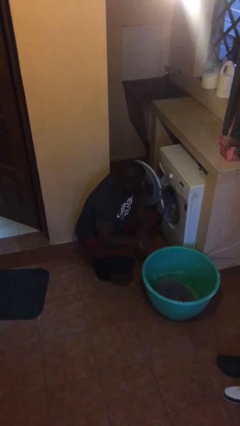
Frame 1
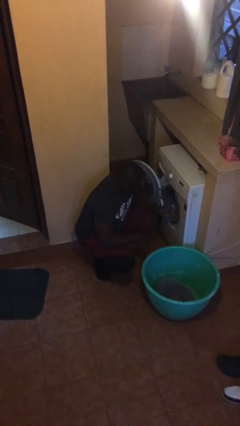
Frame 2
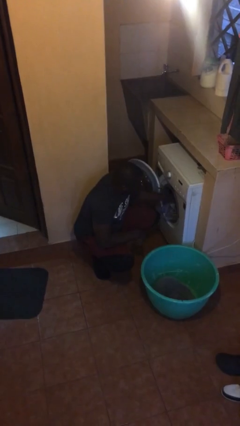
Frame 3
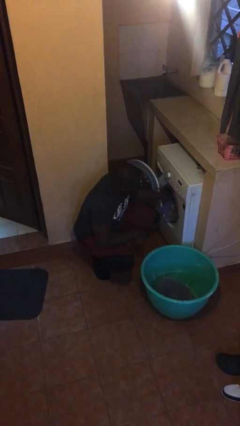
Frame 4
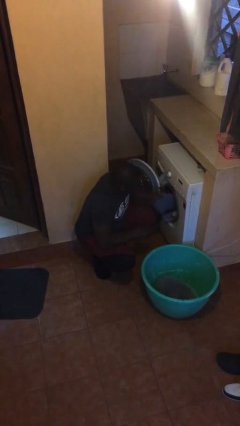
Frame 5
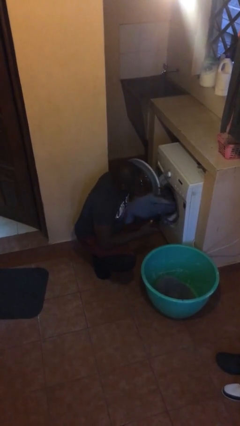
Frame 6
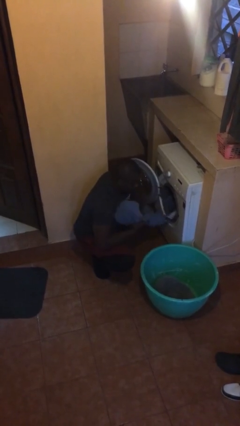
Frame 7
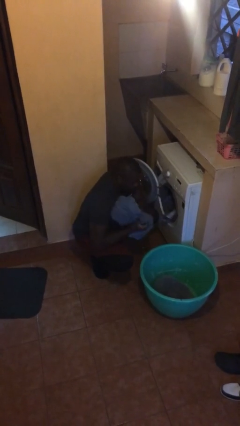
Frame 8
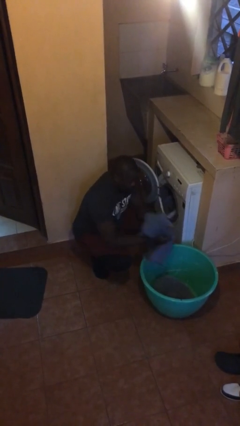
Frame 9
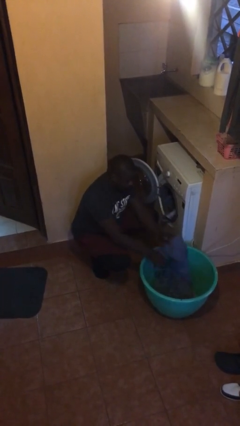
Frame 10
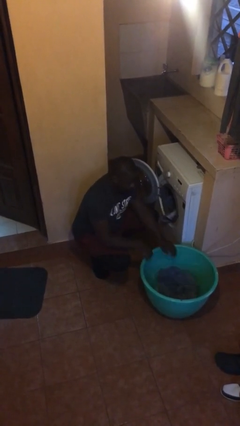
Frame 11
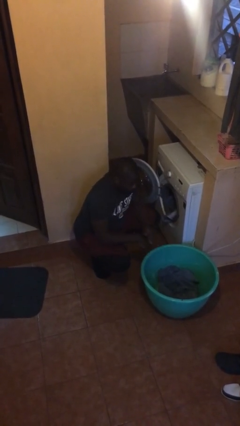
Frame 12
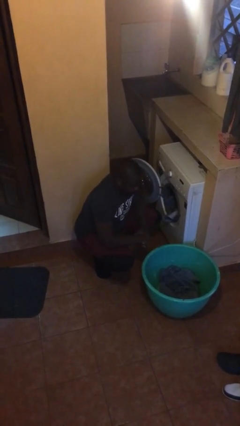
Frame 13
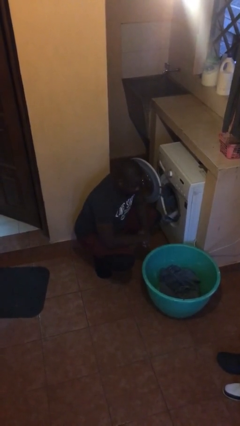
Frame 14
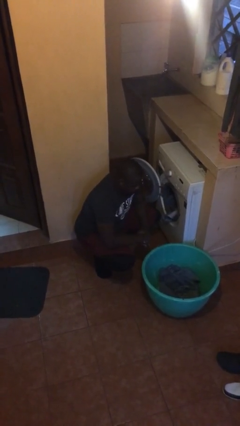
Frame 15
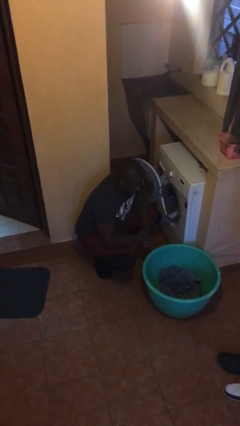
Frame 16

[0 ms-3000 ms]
person unloads clotheswasher

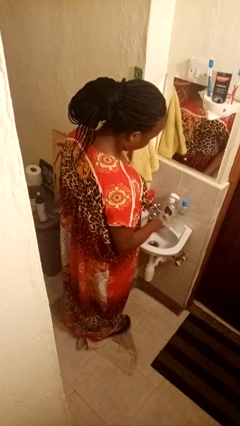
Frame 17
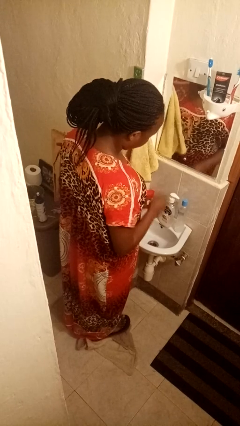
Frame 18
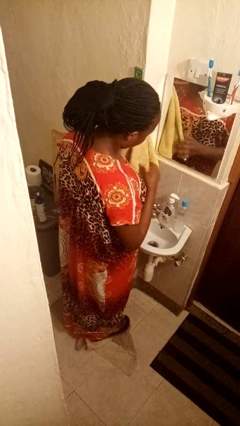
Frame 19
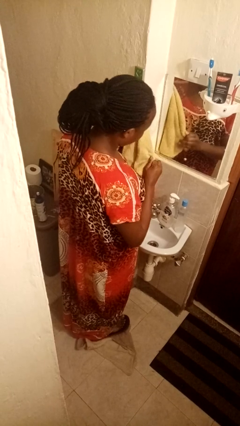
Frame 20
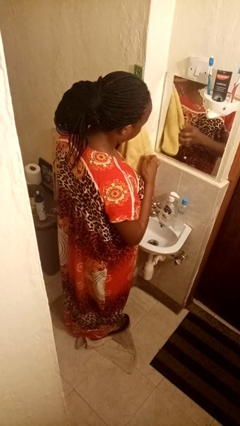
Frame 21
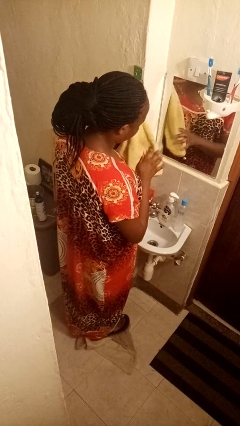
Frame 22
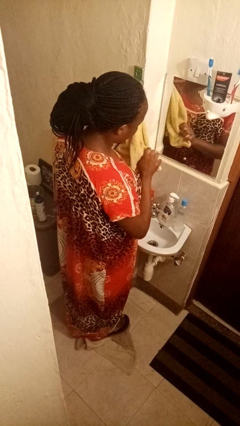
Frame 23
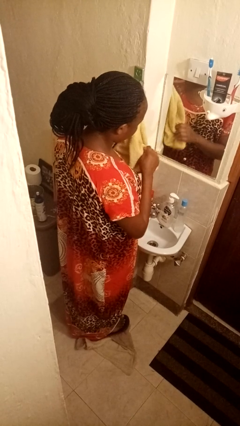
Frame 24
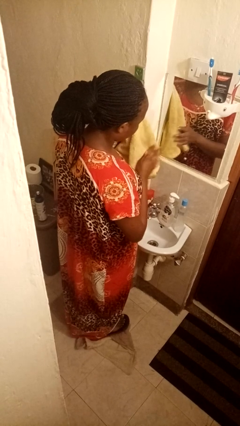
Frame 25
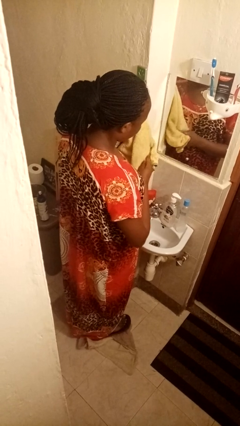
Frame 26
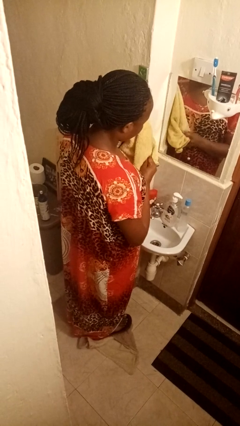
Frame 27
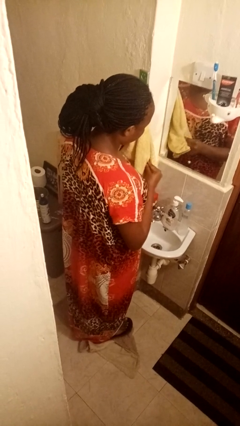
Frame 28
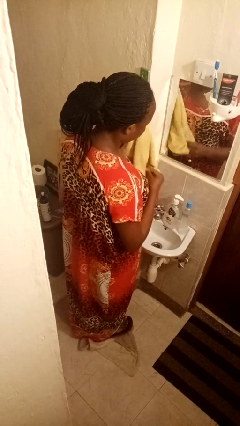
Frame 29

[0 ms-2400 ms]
person dries hands with towel

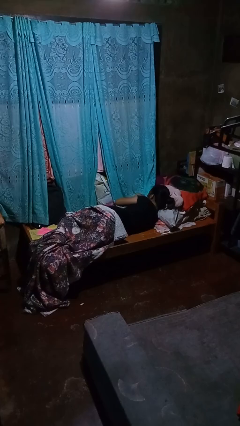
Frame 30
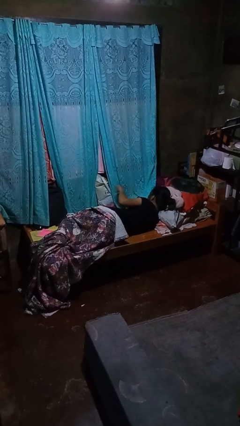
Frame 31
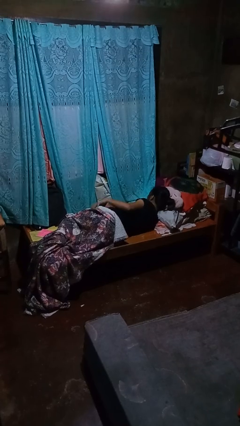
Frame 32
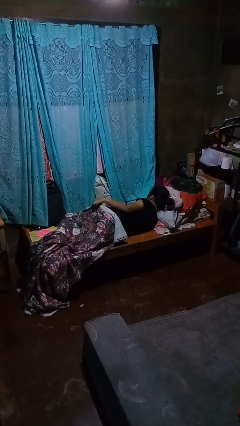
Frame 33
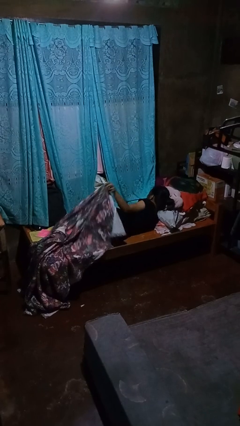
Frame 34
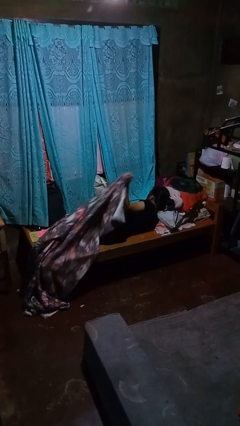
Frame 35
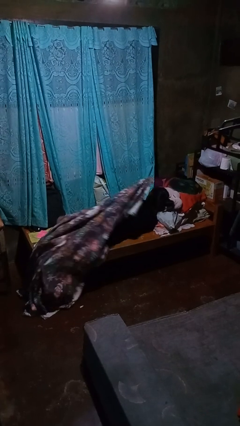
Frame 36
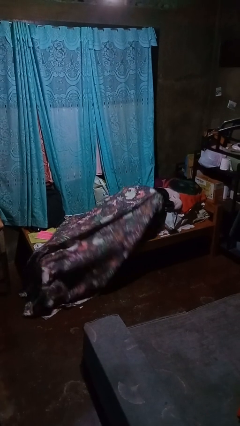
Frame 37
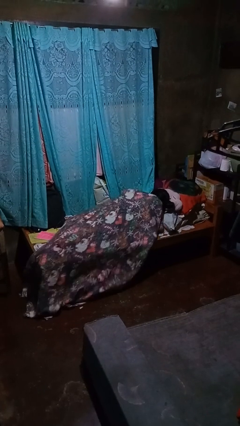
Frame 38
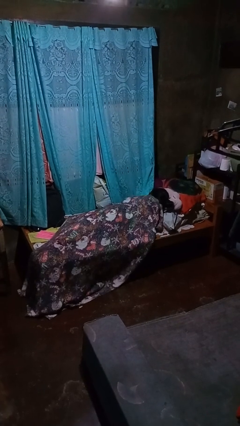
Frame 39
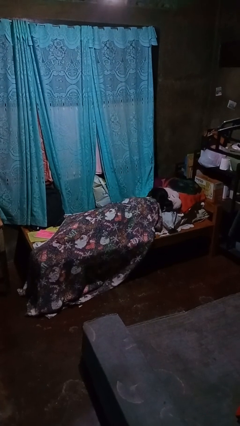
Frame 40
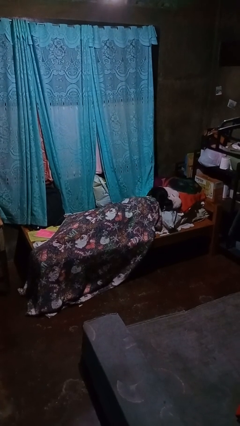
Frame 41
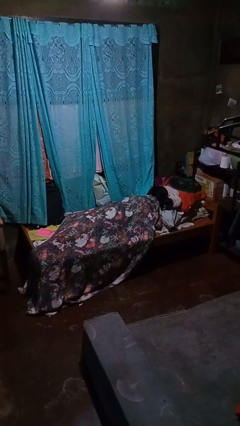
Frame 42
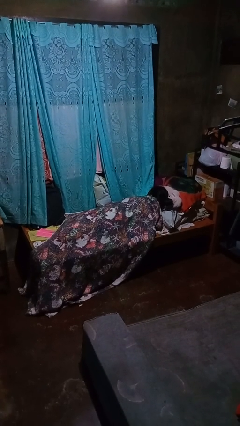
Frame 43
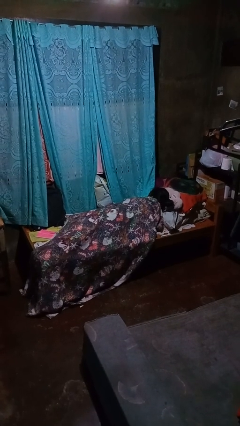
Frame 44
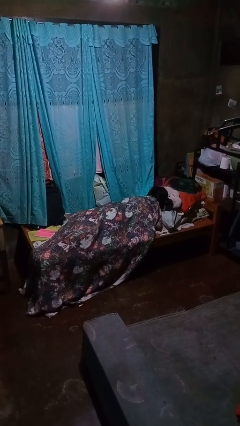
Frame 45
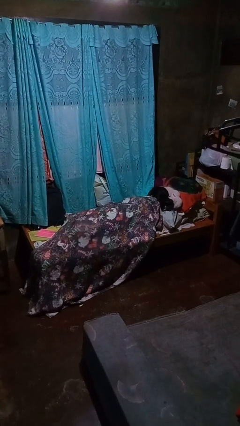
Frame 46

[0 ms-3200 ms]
person covers with bedsheets

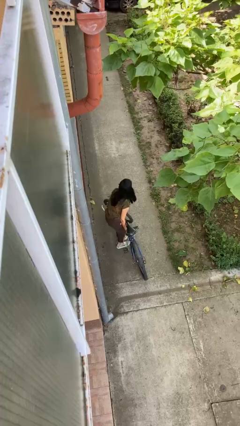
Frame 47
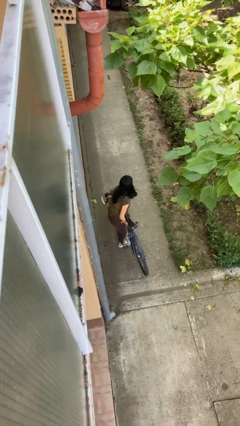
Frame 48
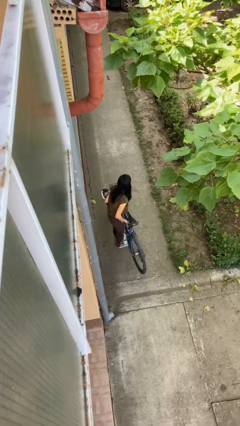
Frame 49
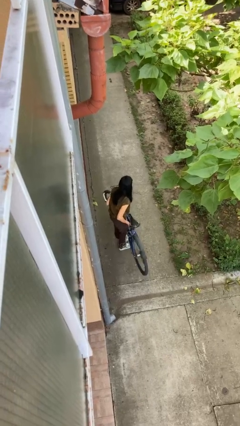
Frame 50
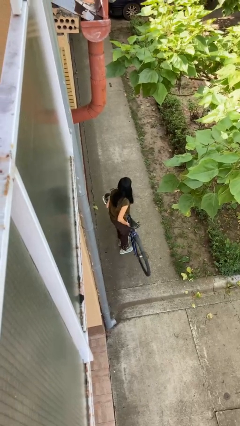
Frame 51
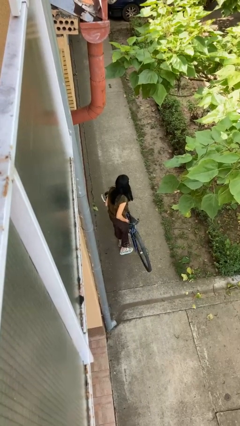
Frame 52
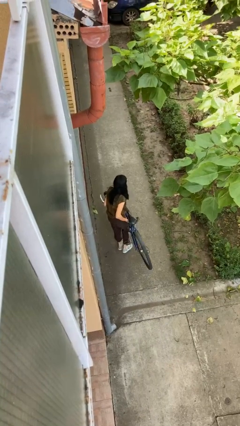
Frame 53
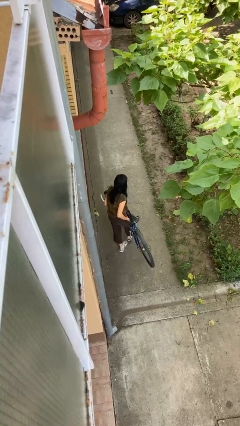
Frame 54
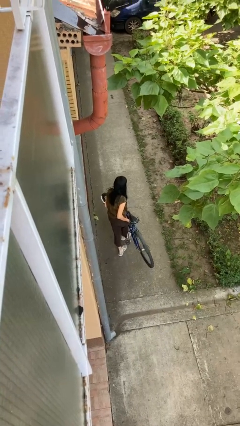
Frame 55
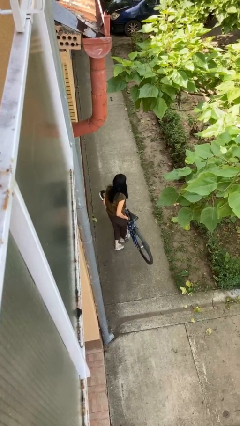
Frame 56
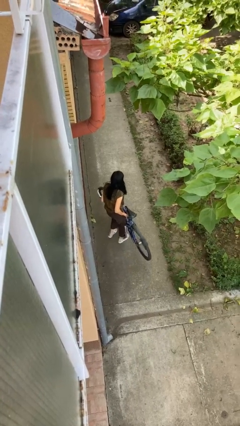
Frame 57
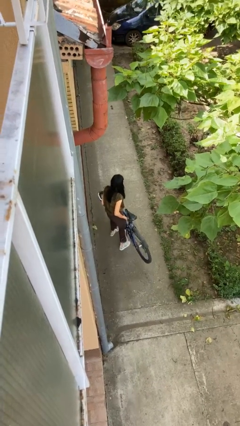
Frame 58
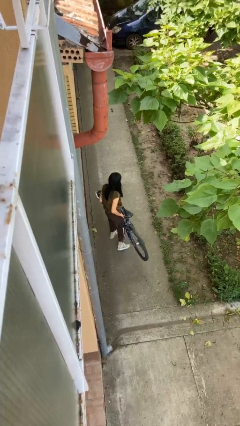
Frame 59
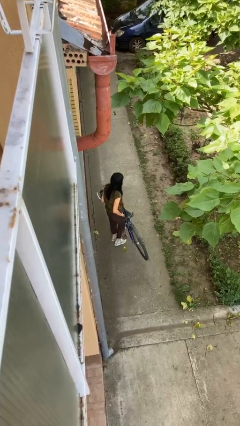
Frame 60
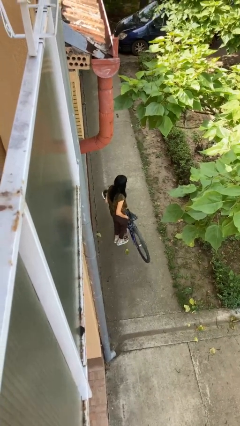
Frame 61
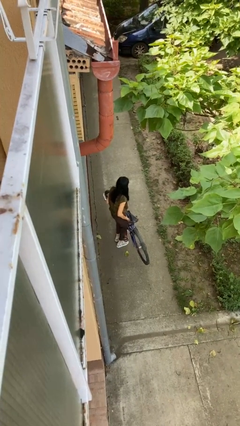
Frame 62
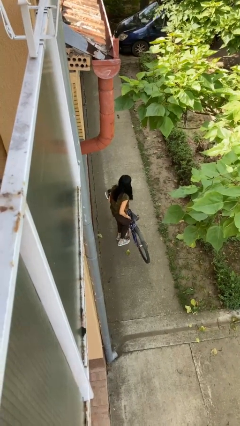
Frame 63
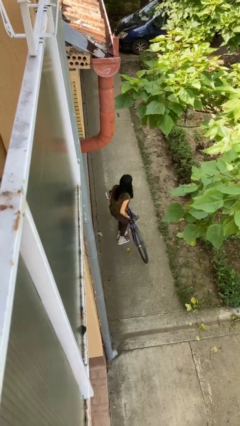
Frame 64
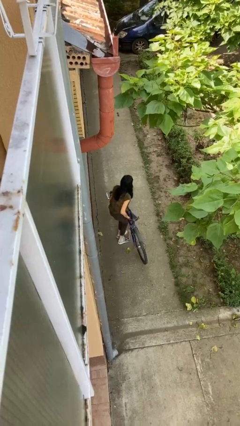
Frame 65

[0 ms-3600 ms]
person carries bicycle

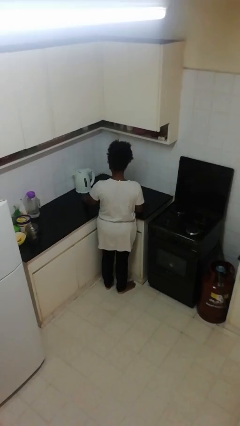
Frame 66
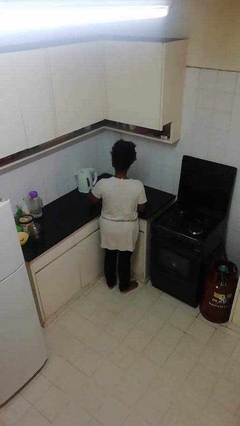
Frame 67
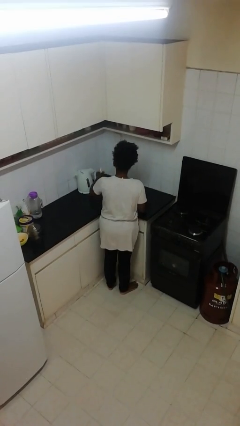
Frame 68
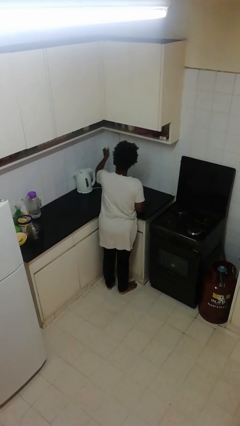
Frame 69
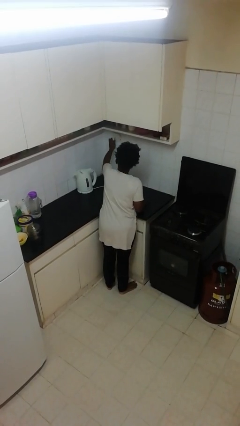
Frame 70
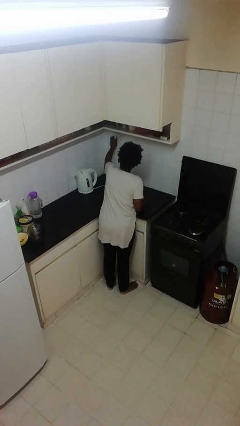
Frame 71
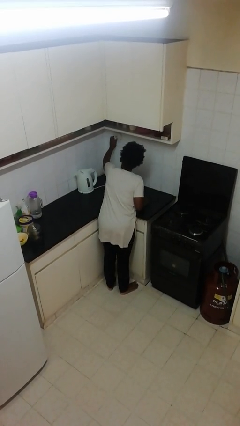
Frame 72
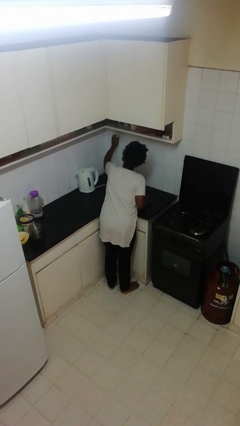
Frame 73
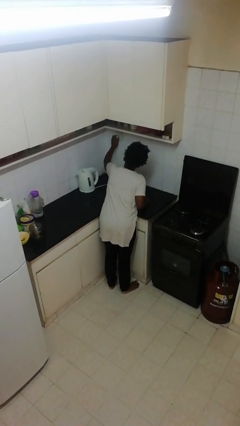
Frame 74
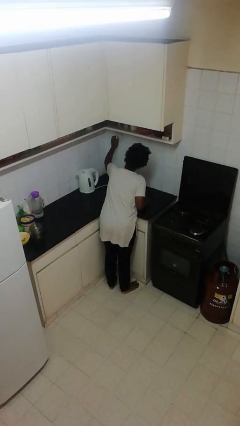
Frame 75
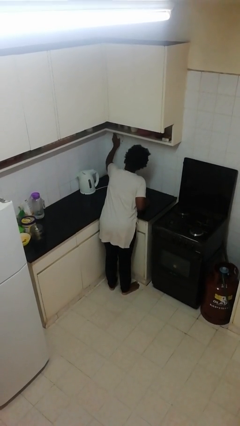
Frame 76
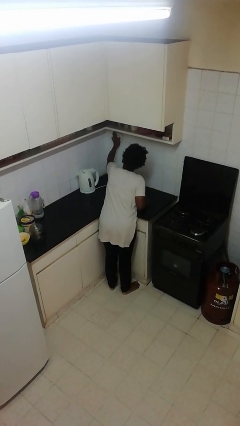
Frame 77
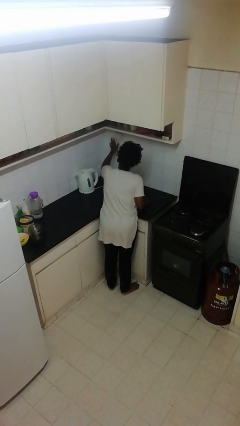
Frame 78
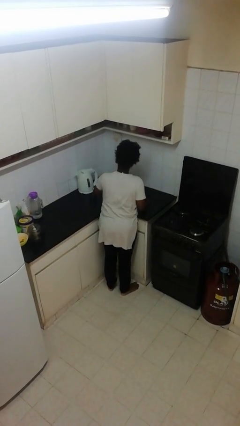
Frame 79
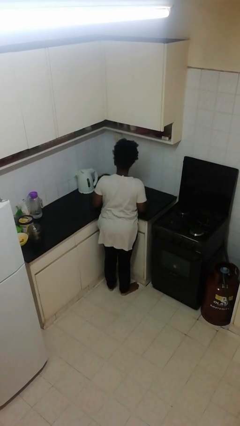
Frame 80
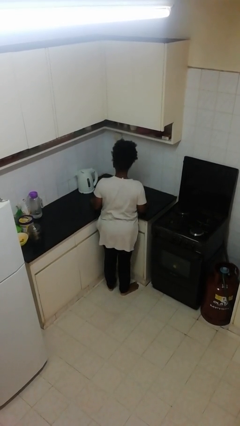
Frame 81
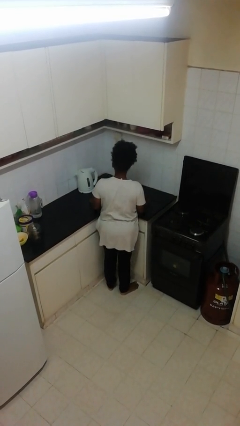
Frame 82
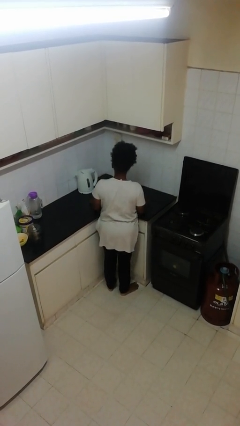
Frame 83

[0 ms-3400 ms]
person plugs into electrical socket

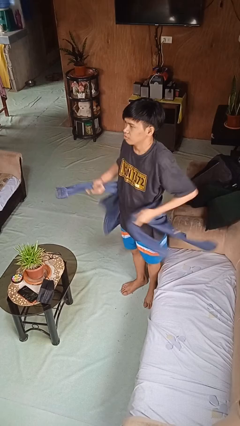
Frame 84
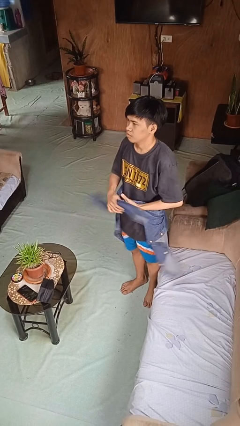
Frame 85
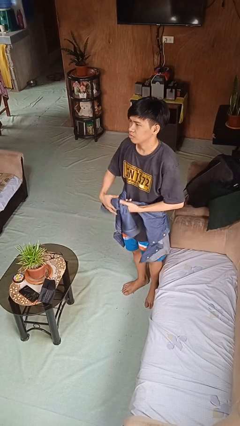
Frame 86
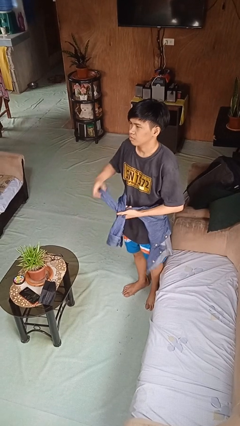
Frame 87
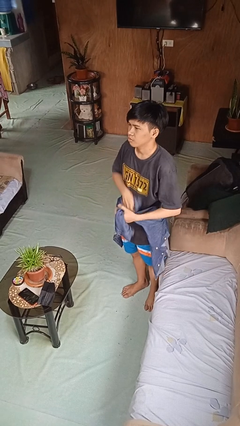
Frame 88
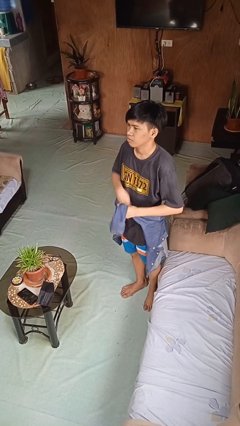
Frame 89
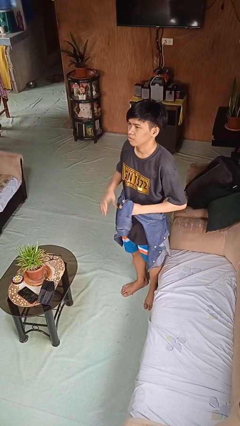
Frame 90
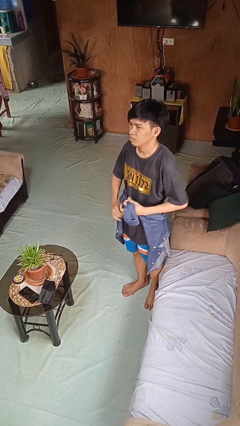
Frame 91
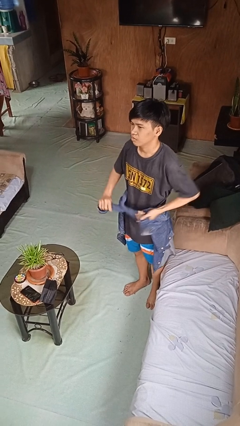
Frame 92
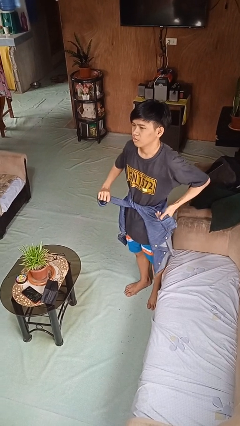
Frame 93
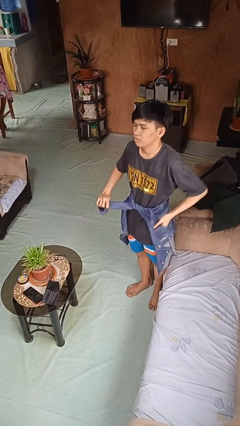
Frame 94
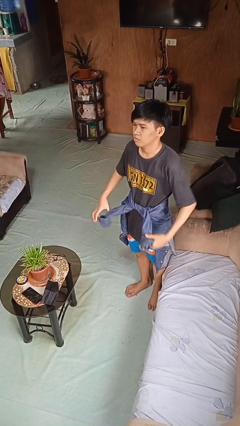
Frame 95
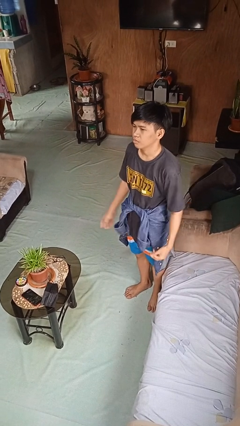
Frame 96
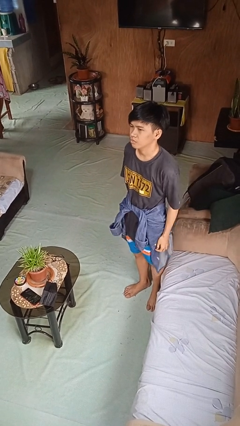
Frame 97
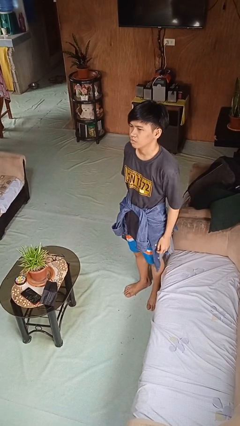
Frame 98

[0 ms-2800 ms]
person ties jacket around waist
